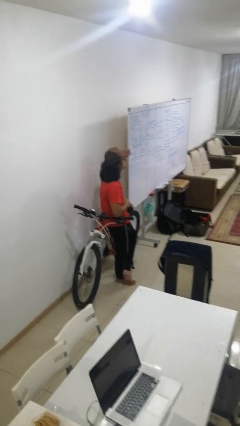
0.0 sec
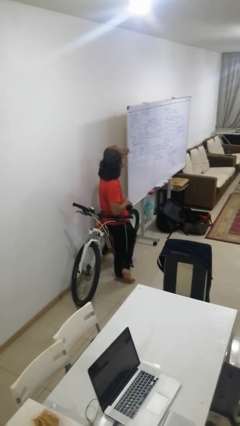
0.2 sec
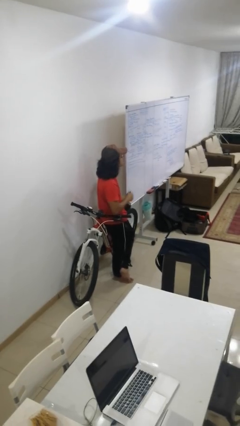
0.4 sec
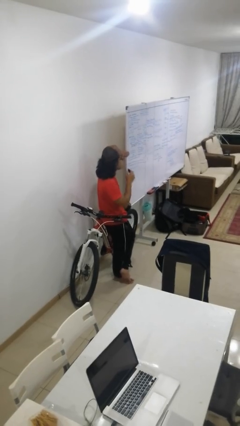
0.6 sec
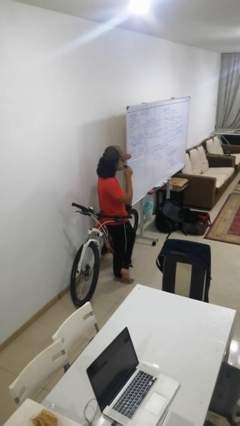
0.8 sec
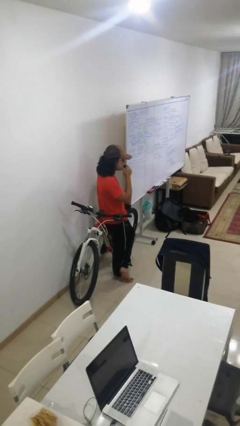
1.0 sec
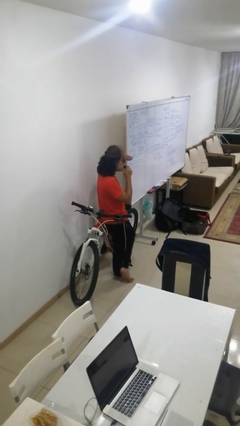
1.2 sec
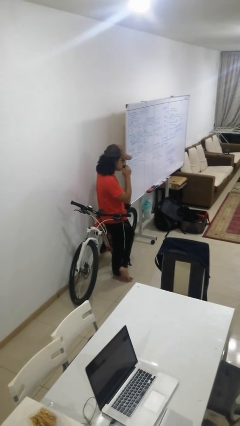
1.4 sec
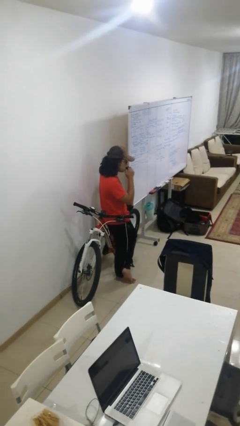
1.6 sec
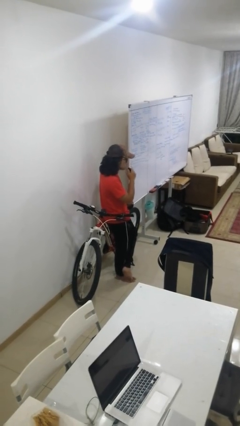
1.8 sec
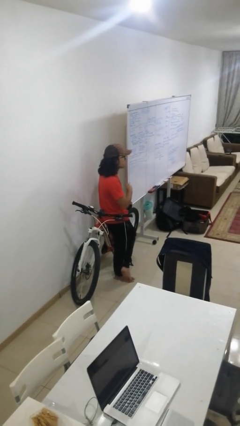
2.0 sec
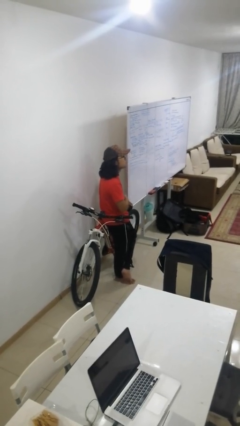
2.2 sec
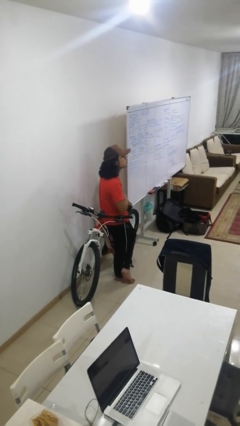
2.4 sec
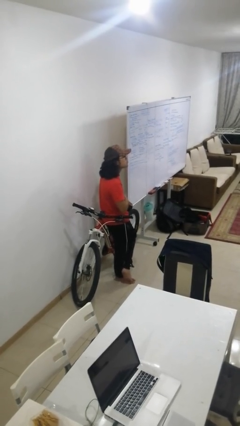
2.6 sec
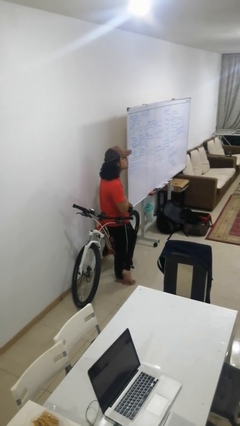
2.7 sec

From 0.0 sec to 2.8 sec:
person vapes

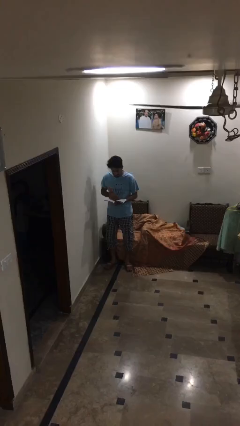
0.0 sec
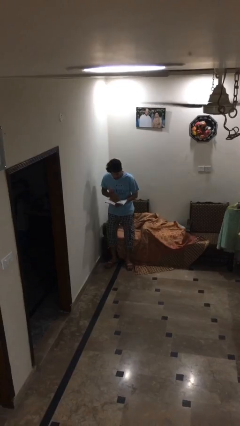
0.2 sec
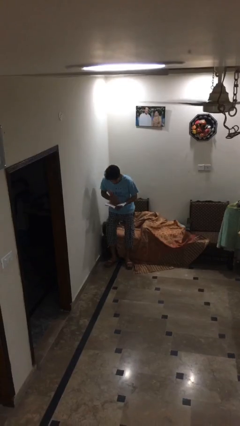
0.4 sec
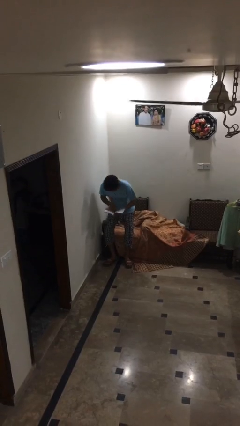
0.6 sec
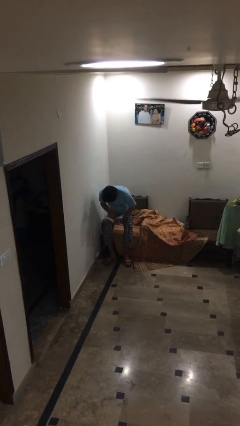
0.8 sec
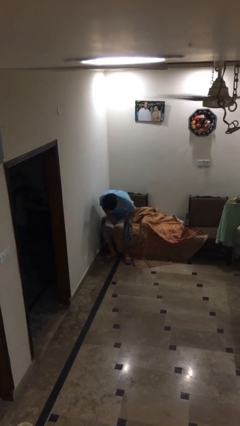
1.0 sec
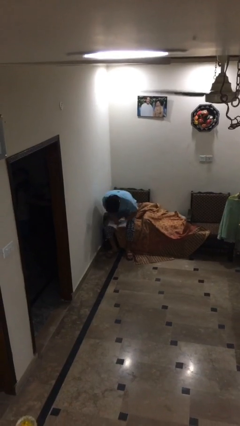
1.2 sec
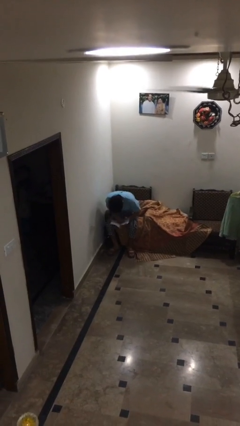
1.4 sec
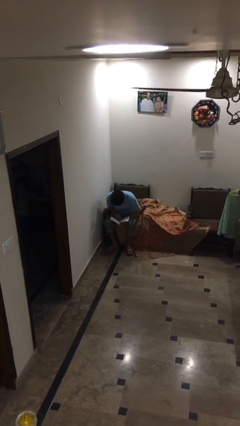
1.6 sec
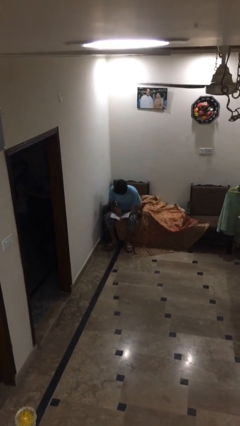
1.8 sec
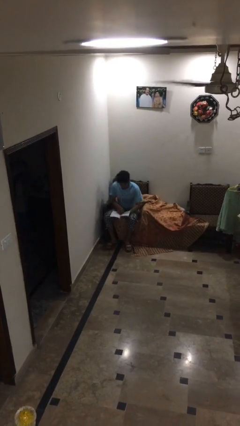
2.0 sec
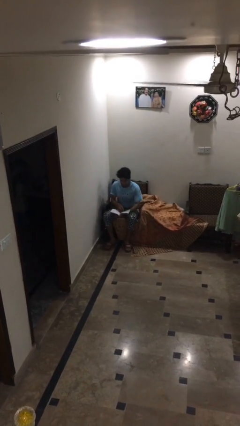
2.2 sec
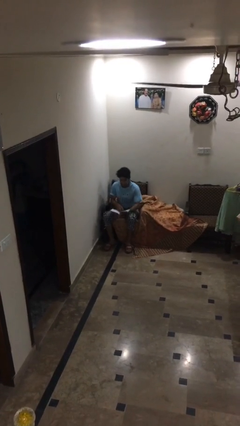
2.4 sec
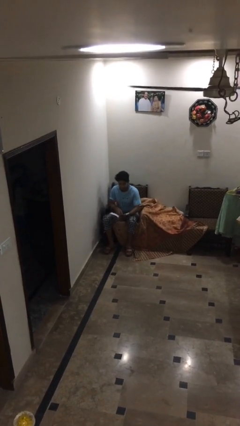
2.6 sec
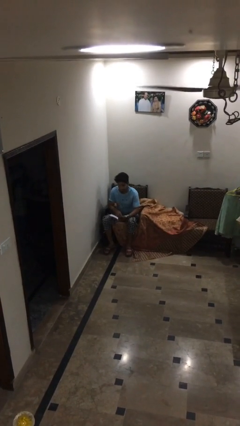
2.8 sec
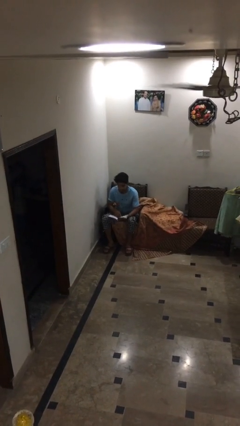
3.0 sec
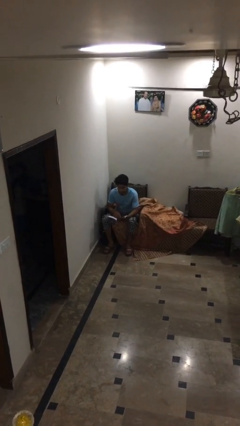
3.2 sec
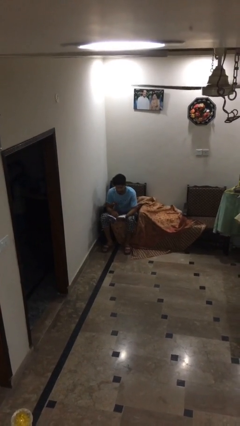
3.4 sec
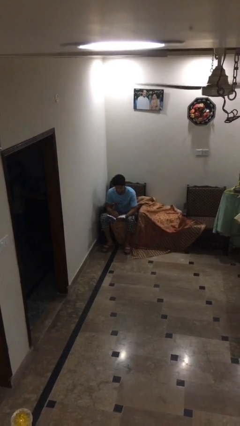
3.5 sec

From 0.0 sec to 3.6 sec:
person sits down

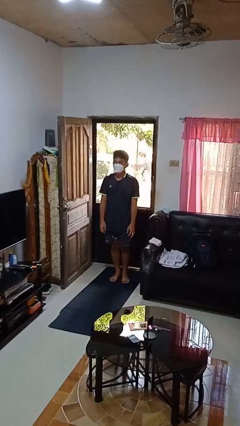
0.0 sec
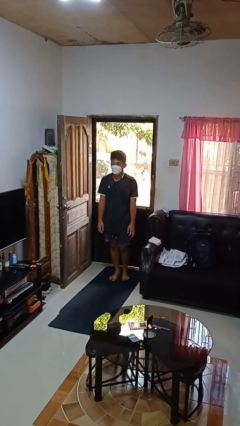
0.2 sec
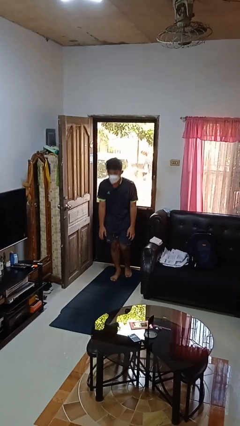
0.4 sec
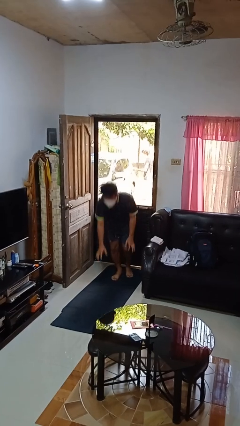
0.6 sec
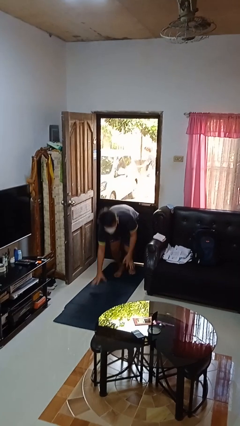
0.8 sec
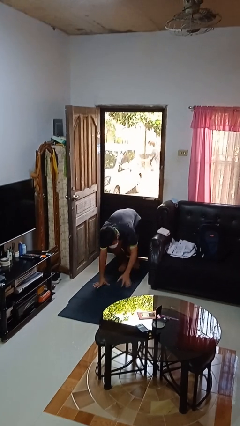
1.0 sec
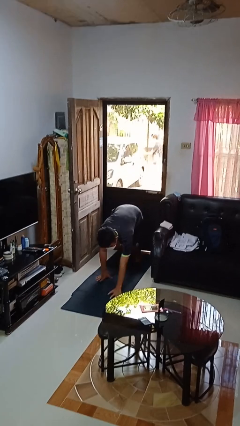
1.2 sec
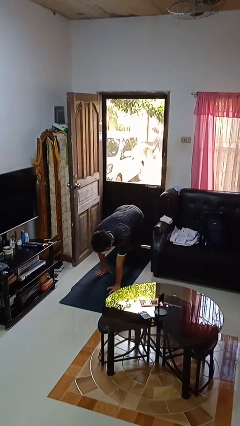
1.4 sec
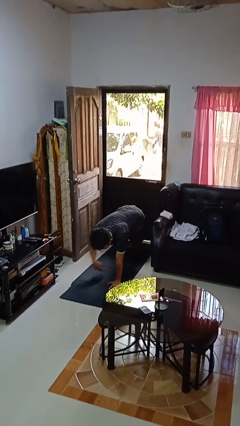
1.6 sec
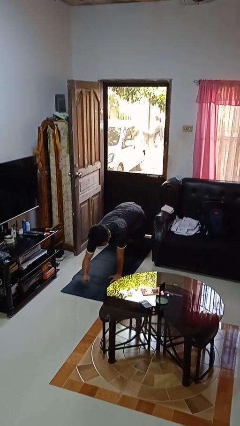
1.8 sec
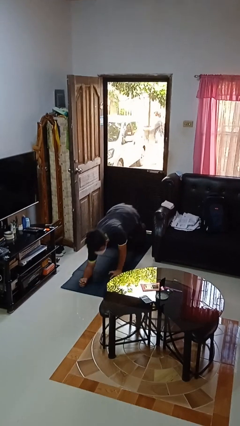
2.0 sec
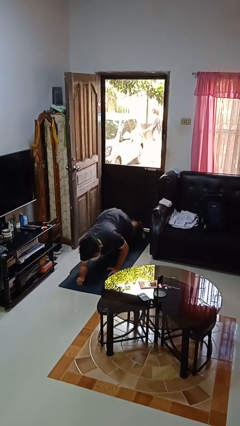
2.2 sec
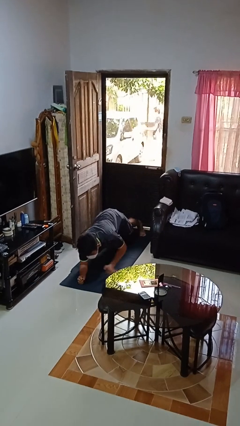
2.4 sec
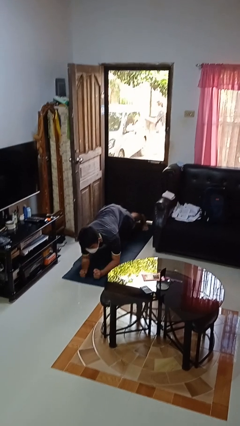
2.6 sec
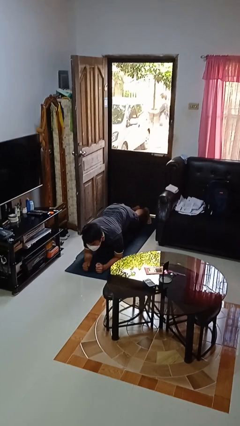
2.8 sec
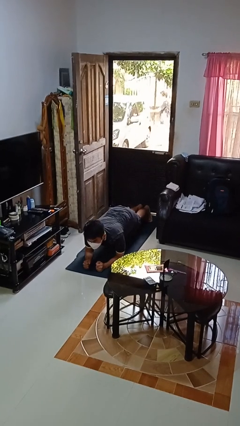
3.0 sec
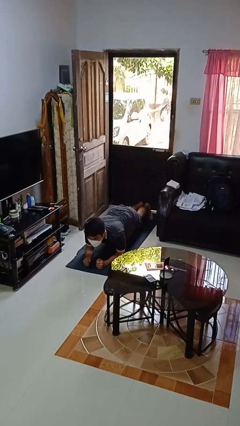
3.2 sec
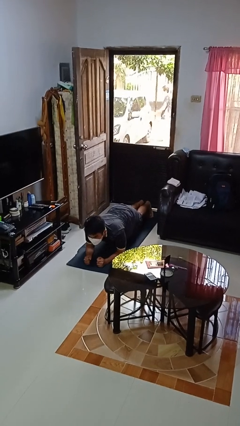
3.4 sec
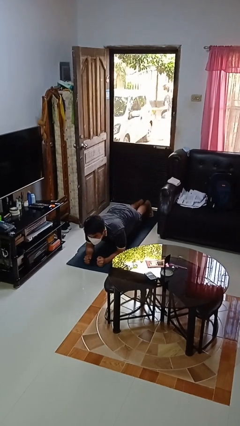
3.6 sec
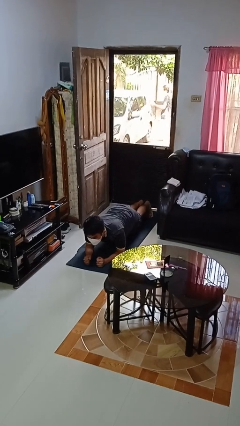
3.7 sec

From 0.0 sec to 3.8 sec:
person exercises with plank

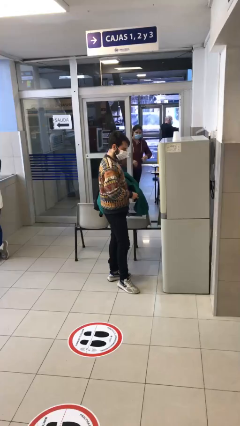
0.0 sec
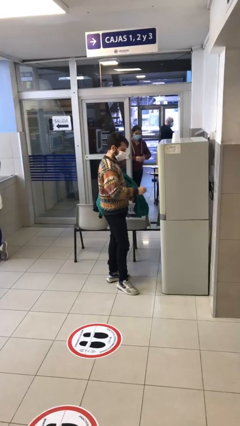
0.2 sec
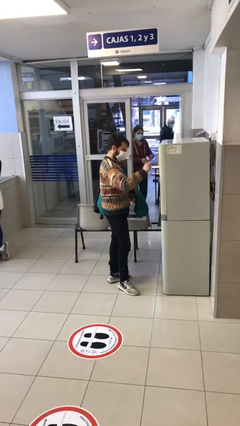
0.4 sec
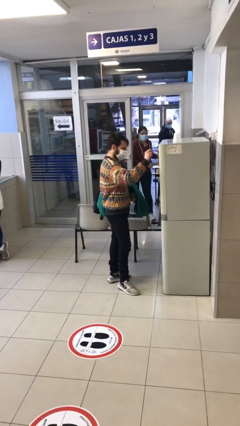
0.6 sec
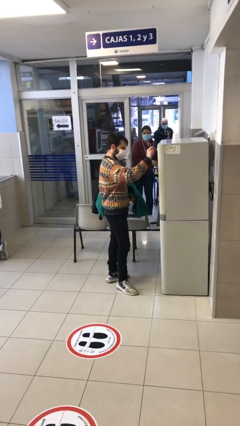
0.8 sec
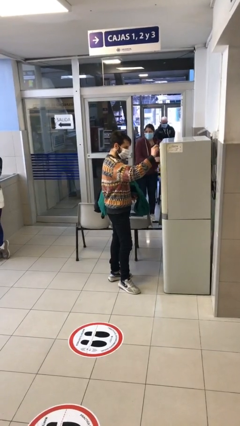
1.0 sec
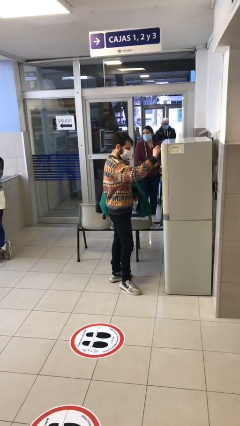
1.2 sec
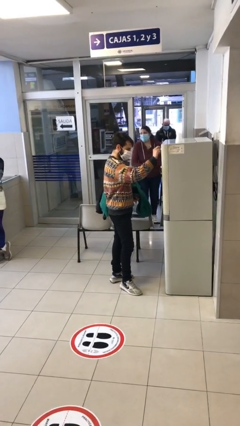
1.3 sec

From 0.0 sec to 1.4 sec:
person purchases from machine

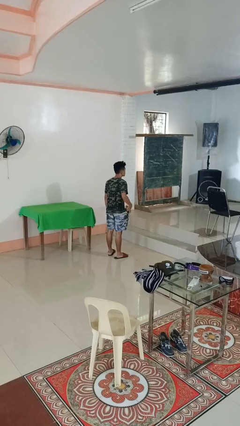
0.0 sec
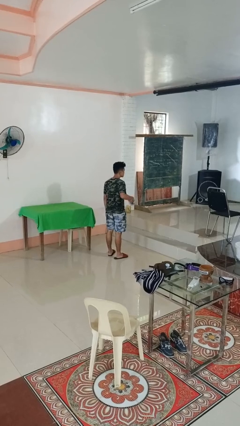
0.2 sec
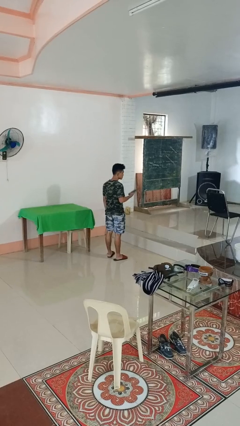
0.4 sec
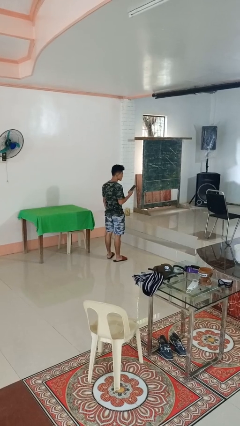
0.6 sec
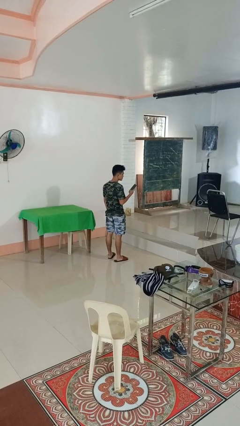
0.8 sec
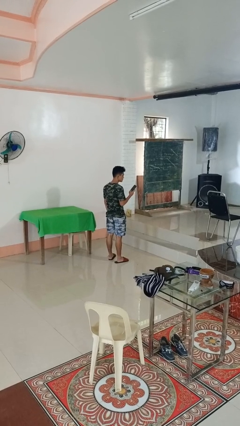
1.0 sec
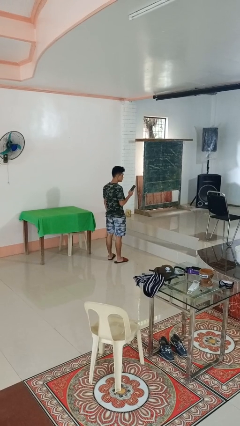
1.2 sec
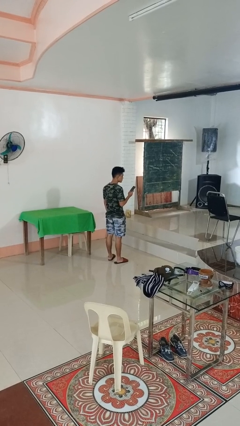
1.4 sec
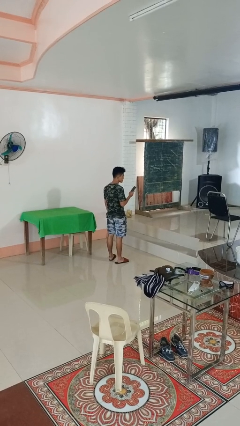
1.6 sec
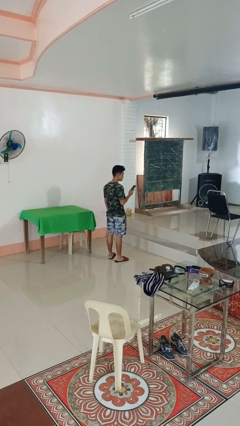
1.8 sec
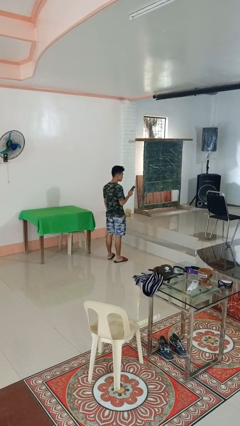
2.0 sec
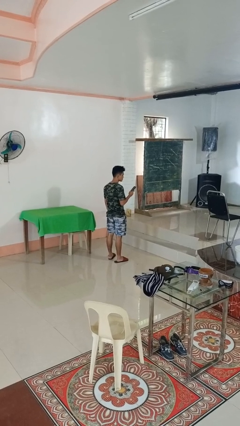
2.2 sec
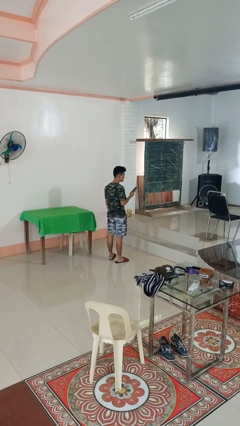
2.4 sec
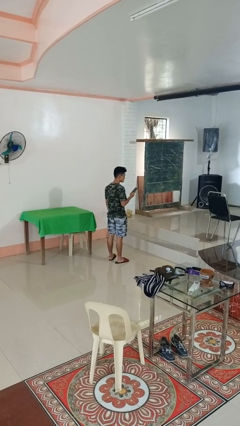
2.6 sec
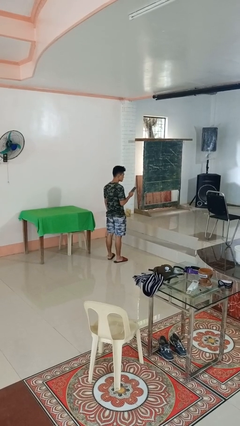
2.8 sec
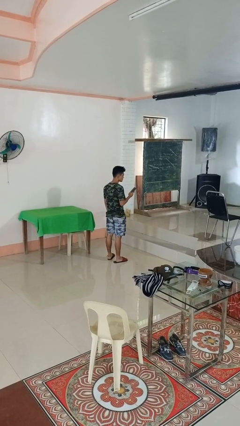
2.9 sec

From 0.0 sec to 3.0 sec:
person takes phone from pocket

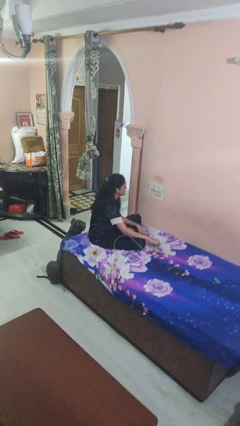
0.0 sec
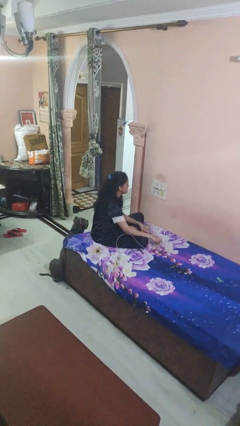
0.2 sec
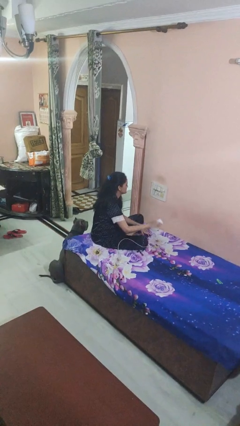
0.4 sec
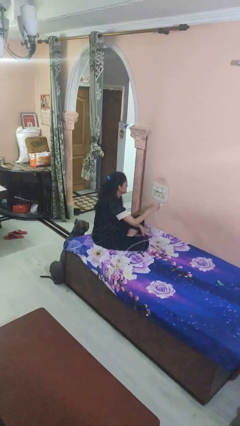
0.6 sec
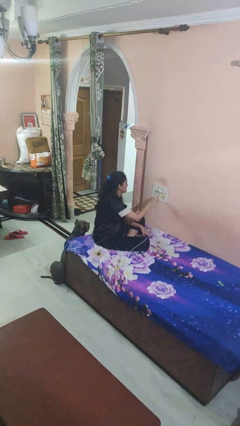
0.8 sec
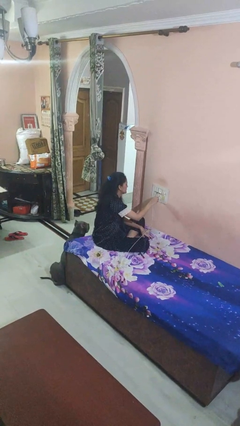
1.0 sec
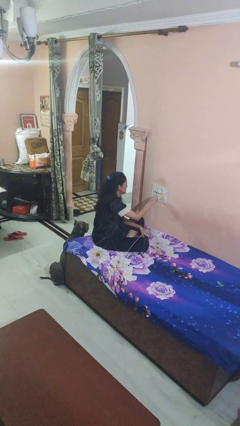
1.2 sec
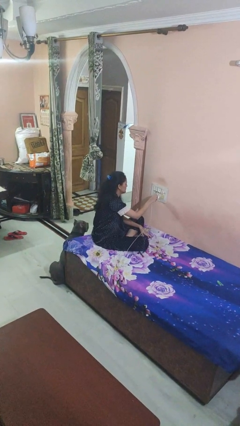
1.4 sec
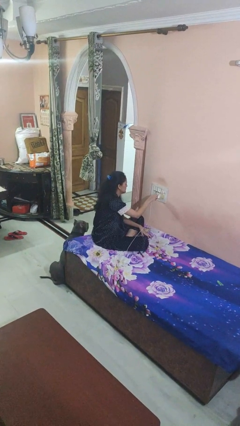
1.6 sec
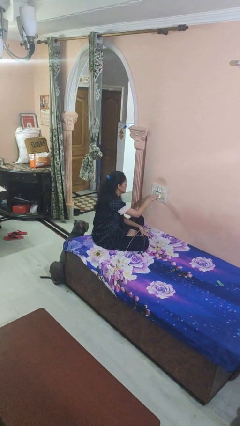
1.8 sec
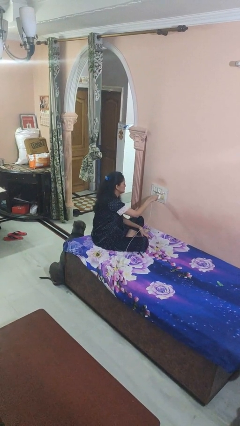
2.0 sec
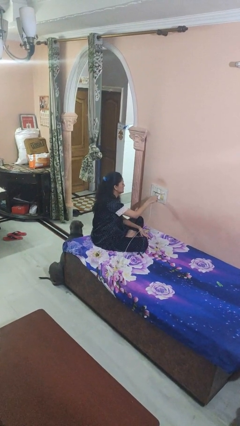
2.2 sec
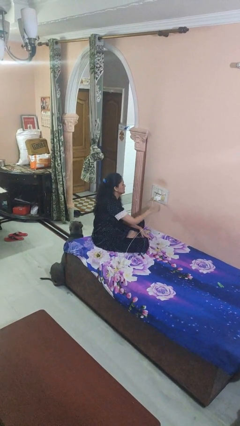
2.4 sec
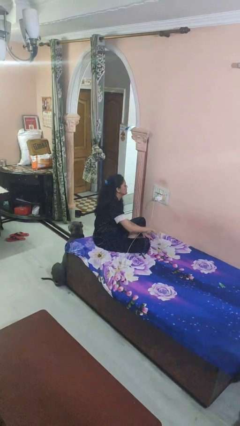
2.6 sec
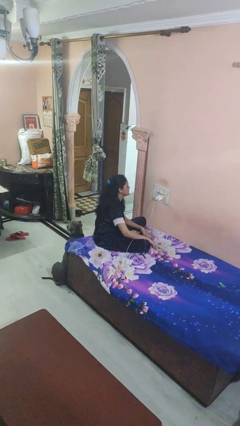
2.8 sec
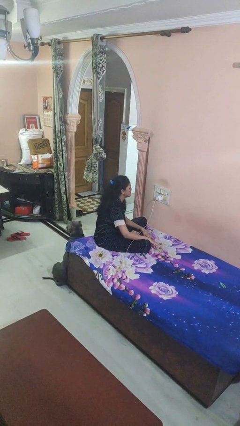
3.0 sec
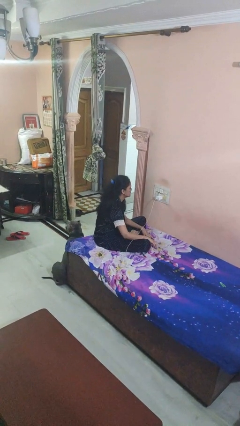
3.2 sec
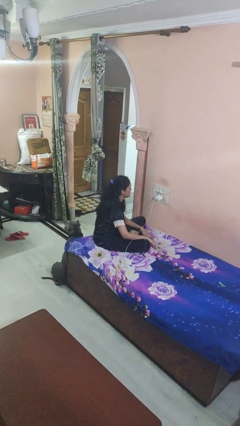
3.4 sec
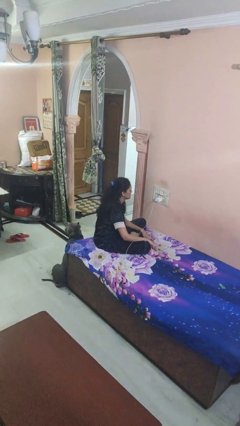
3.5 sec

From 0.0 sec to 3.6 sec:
person plugs into electrical socket
